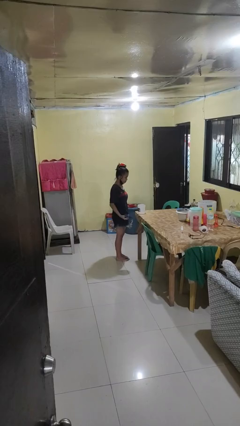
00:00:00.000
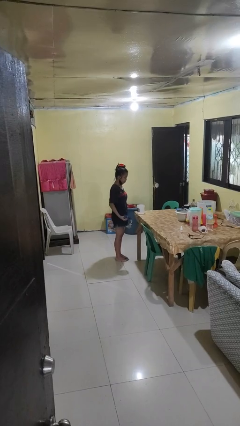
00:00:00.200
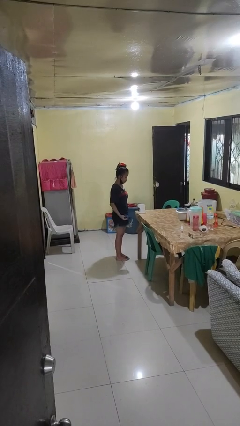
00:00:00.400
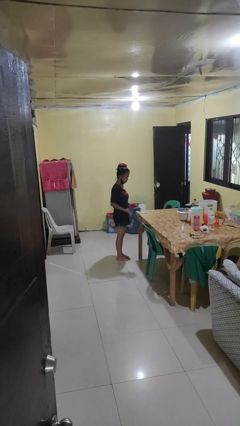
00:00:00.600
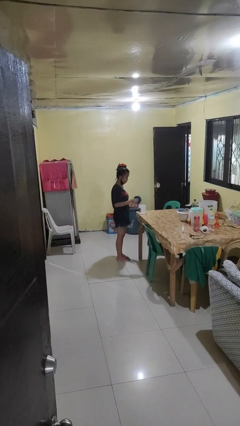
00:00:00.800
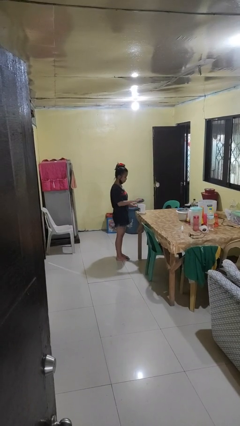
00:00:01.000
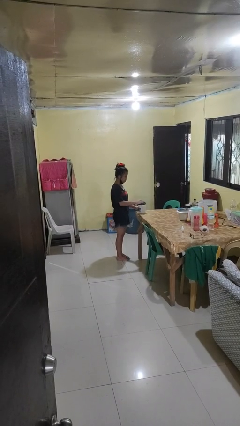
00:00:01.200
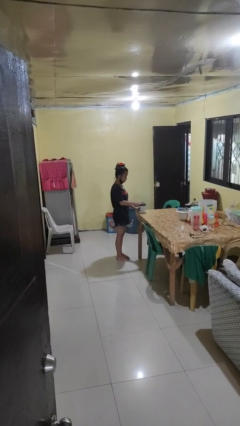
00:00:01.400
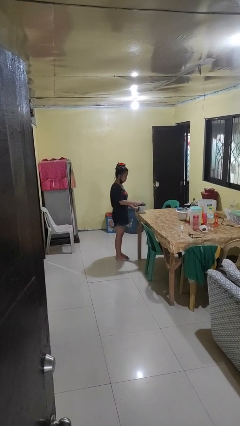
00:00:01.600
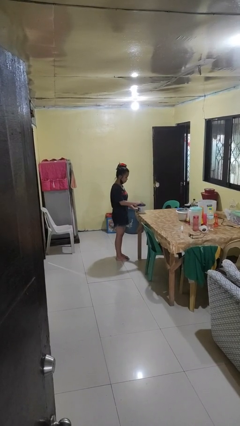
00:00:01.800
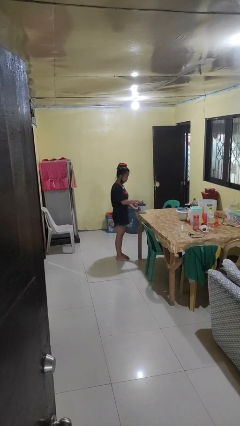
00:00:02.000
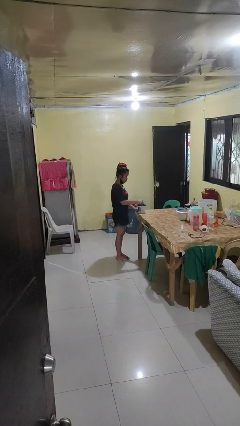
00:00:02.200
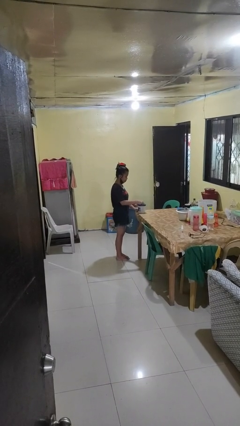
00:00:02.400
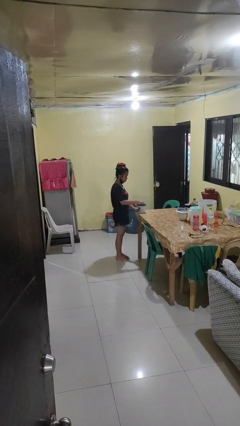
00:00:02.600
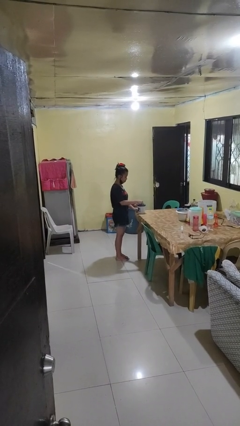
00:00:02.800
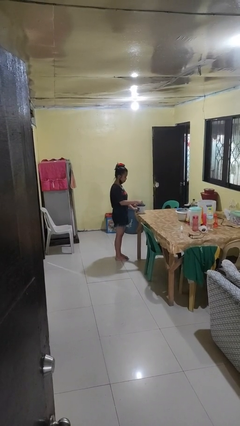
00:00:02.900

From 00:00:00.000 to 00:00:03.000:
person closes jar

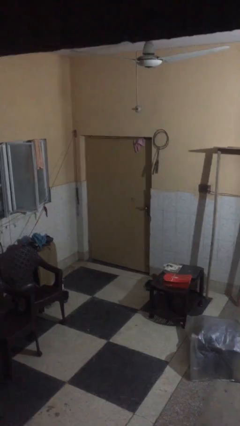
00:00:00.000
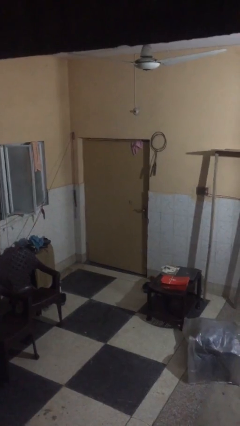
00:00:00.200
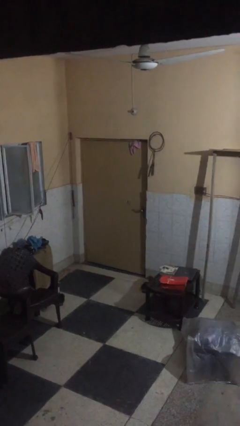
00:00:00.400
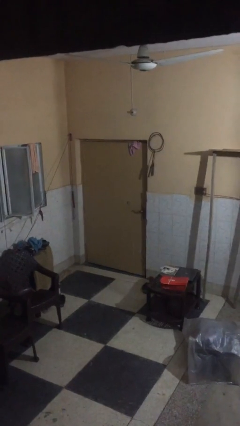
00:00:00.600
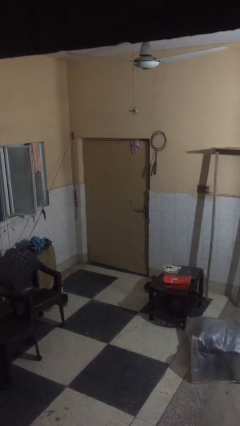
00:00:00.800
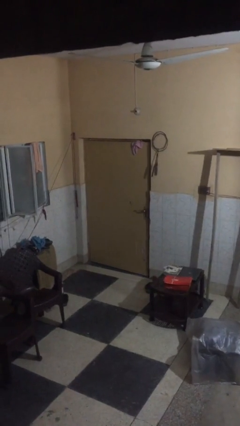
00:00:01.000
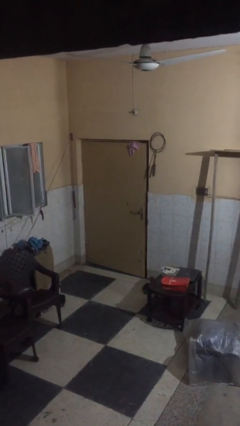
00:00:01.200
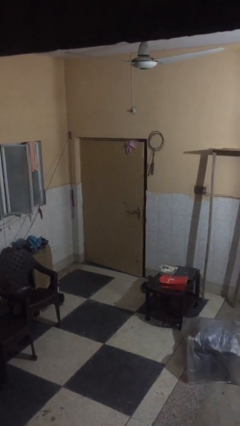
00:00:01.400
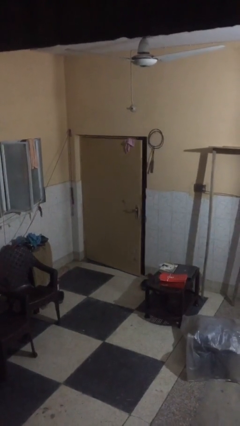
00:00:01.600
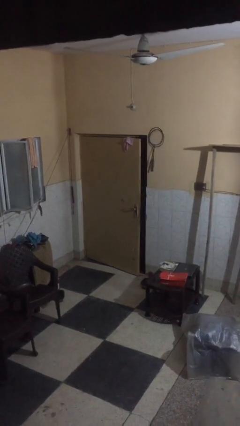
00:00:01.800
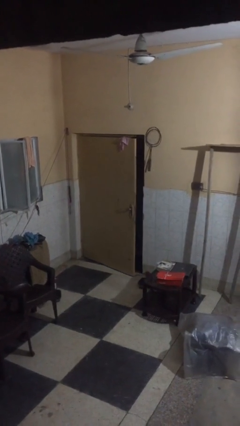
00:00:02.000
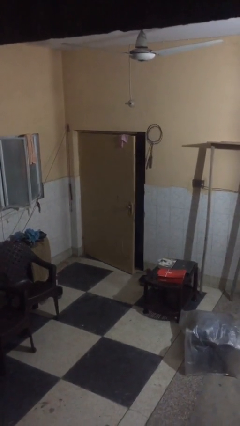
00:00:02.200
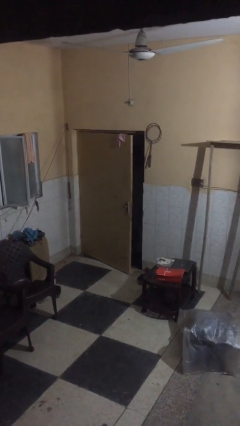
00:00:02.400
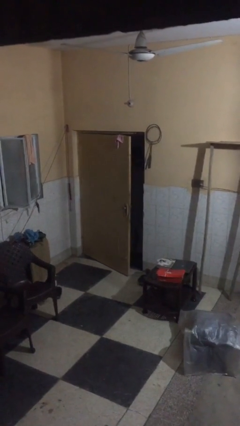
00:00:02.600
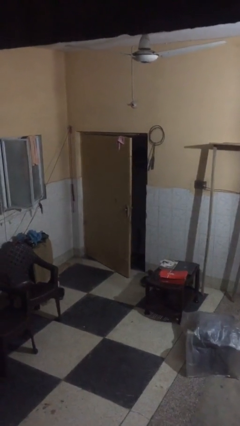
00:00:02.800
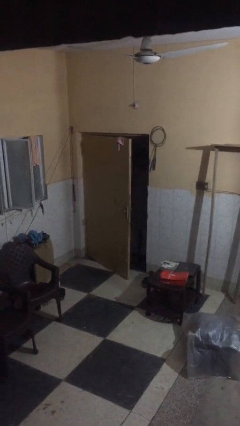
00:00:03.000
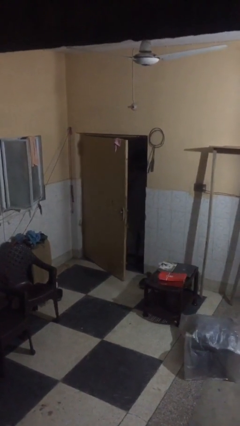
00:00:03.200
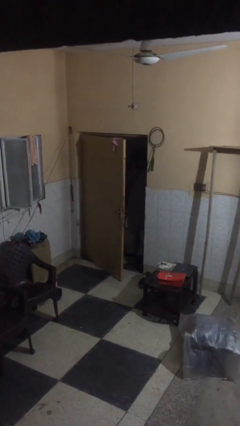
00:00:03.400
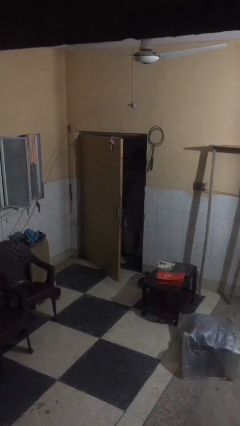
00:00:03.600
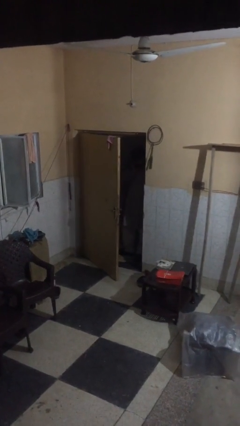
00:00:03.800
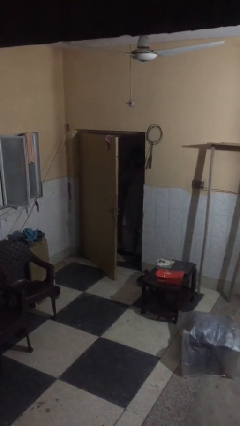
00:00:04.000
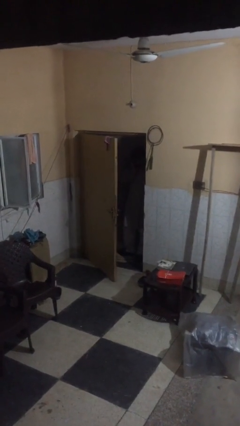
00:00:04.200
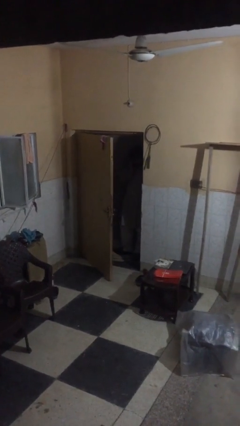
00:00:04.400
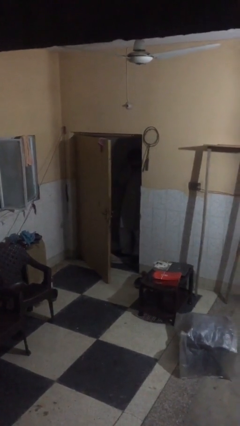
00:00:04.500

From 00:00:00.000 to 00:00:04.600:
person opens facility door

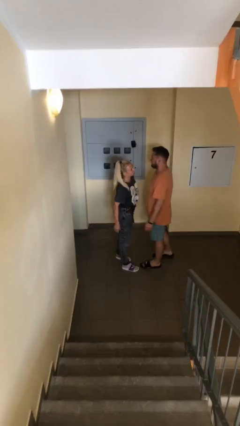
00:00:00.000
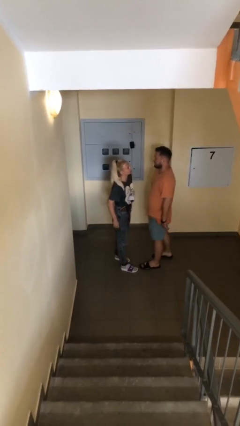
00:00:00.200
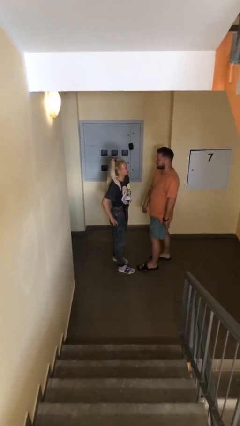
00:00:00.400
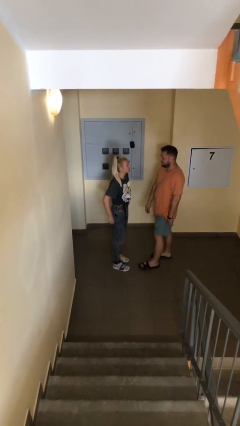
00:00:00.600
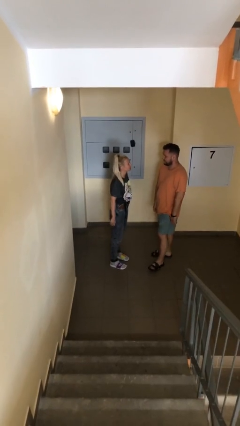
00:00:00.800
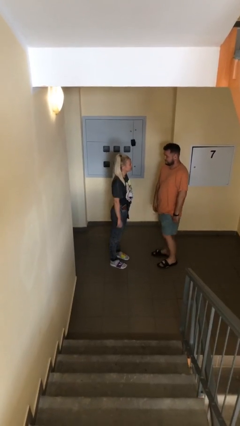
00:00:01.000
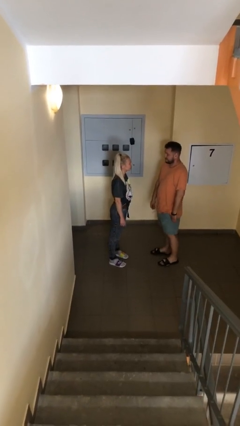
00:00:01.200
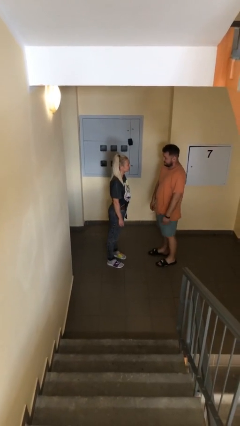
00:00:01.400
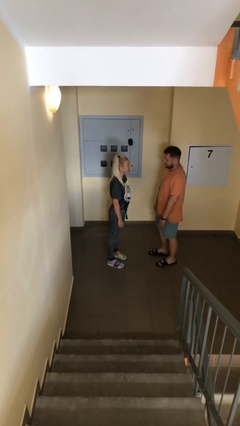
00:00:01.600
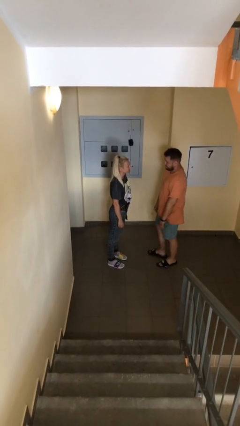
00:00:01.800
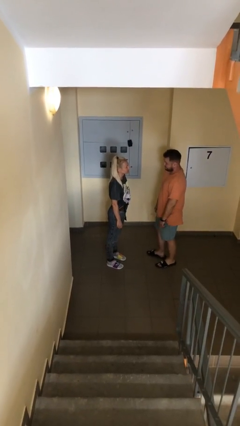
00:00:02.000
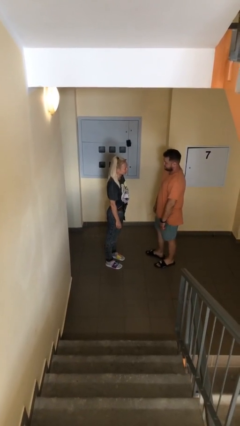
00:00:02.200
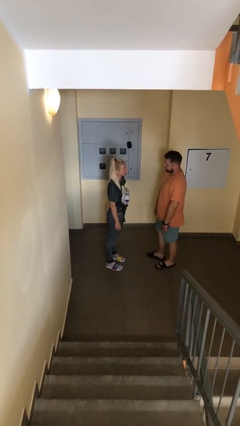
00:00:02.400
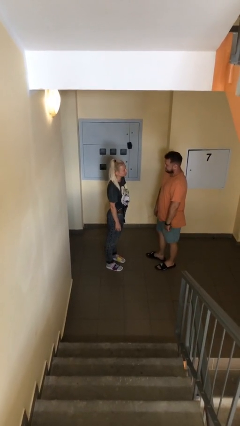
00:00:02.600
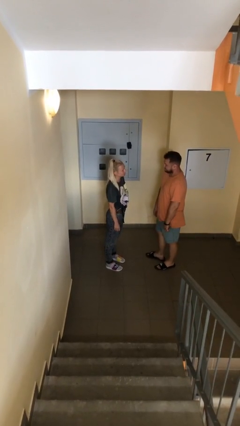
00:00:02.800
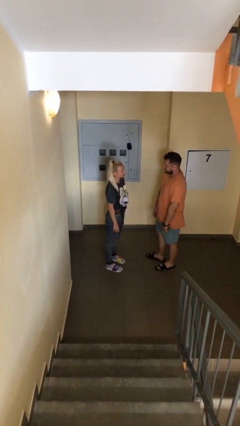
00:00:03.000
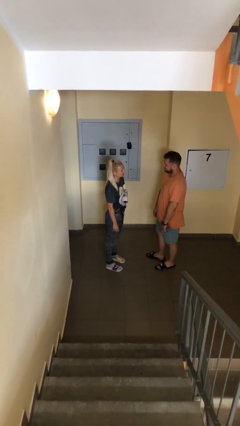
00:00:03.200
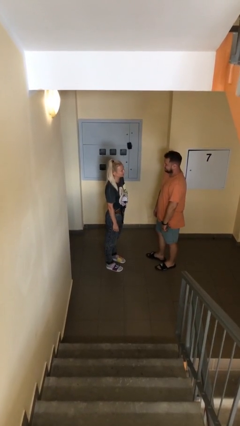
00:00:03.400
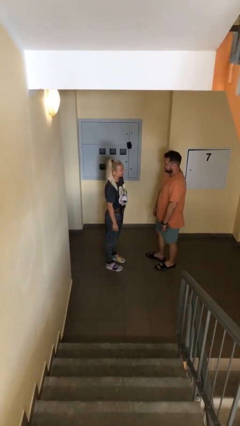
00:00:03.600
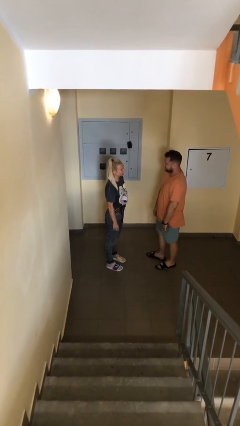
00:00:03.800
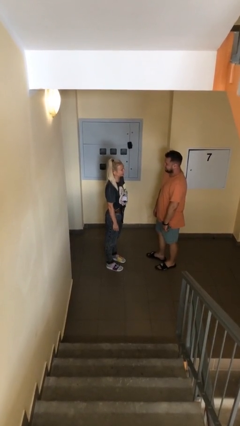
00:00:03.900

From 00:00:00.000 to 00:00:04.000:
person talks to person

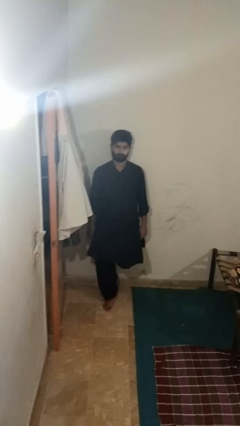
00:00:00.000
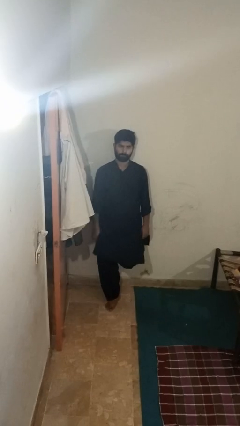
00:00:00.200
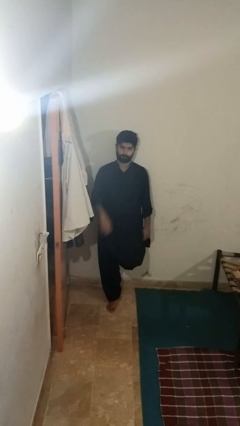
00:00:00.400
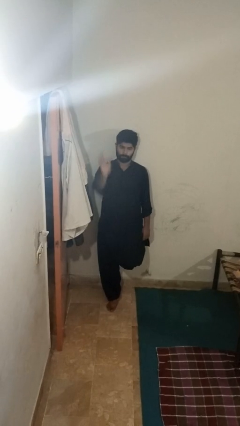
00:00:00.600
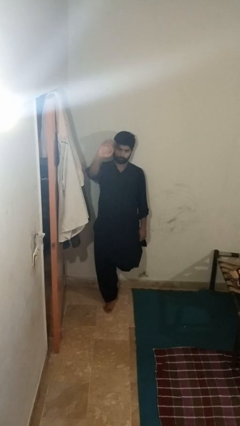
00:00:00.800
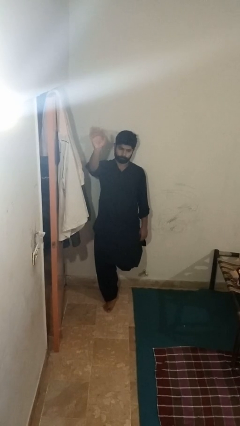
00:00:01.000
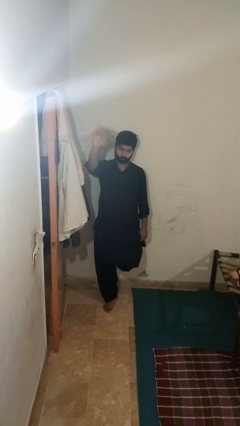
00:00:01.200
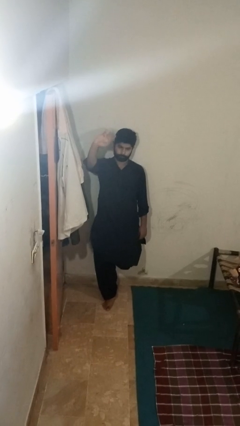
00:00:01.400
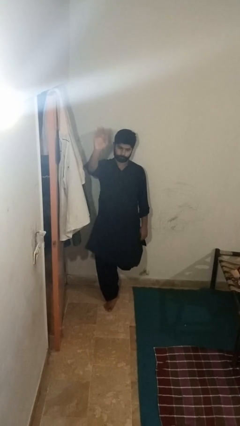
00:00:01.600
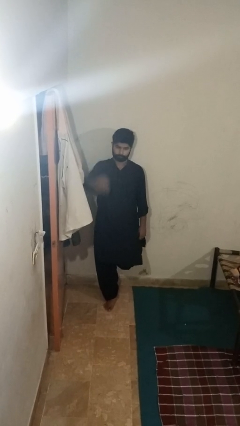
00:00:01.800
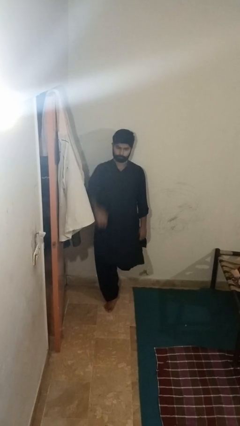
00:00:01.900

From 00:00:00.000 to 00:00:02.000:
person waves at person

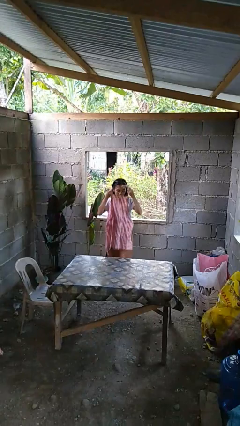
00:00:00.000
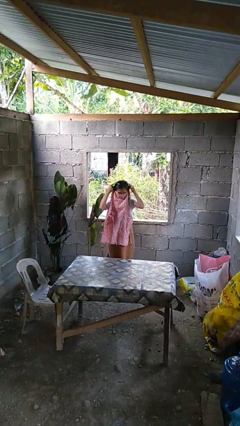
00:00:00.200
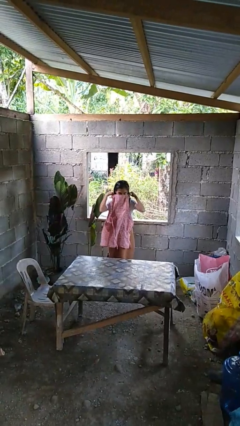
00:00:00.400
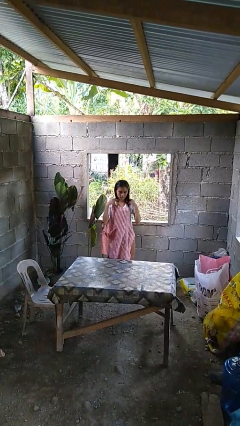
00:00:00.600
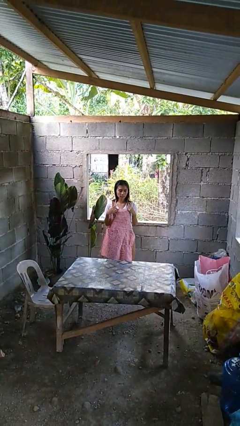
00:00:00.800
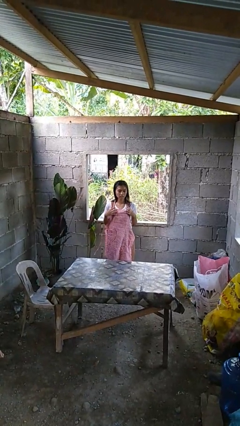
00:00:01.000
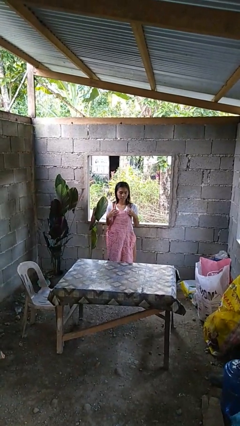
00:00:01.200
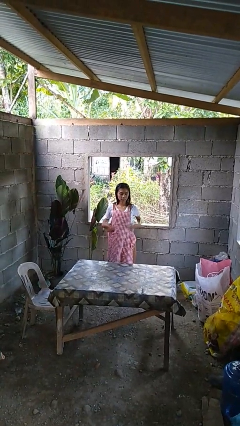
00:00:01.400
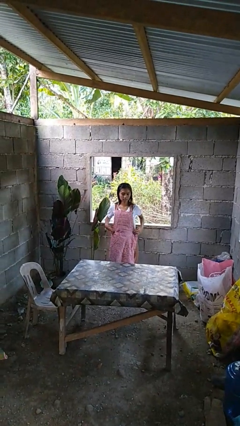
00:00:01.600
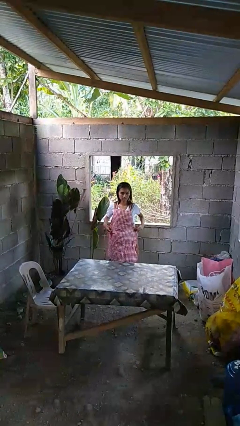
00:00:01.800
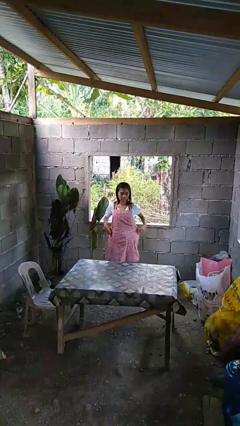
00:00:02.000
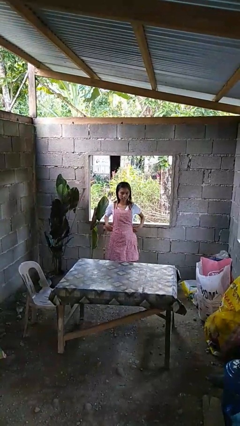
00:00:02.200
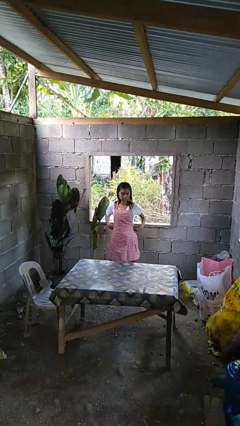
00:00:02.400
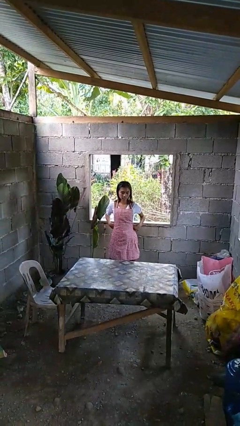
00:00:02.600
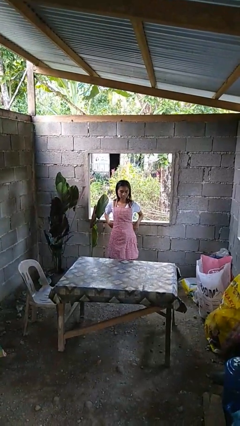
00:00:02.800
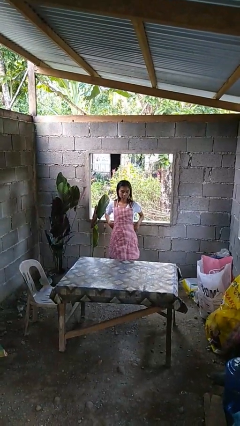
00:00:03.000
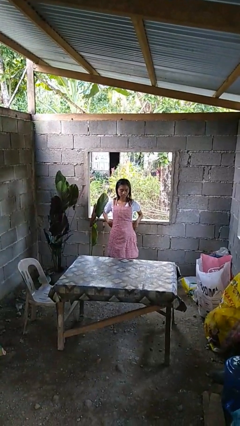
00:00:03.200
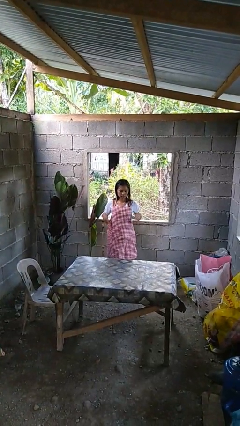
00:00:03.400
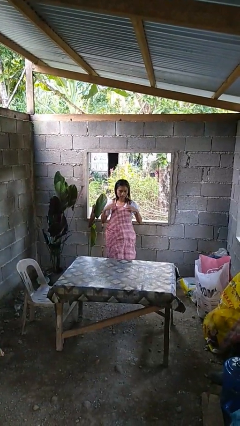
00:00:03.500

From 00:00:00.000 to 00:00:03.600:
person puts on apron
